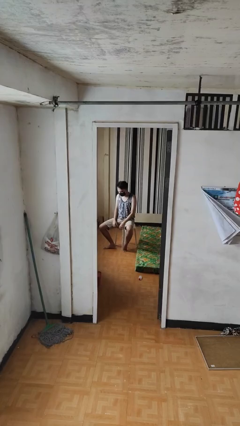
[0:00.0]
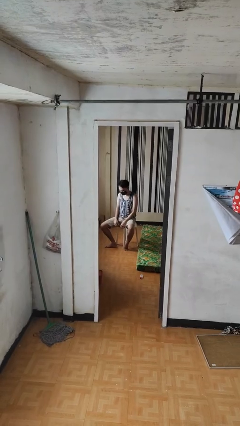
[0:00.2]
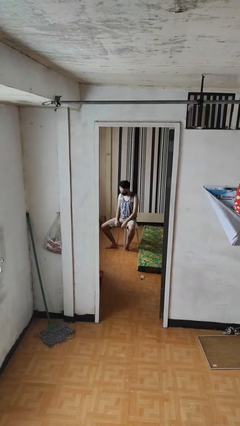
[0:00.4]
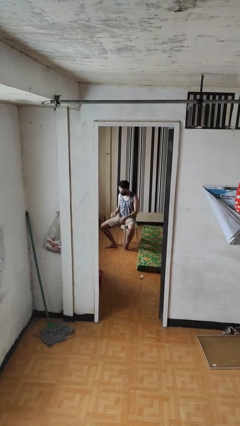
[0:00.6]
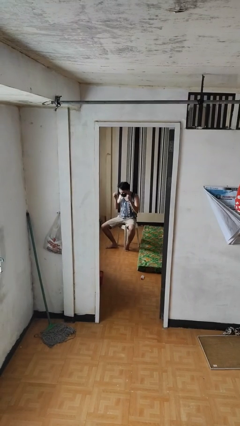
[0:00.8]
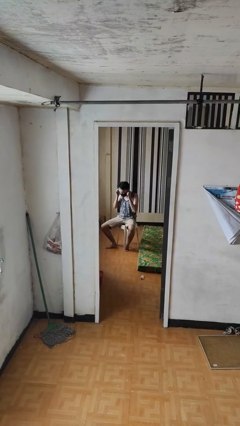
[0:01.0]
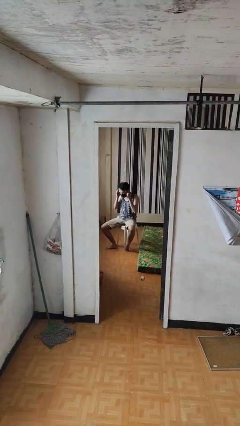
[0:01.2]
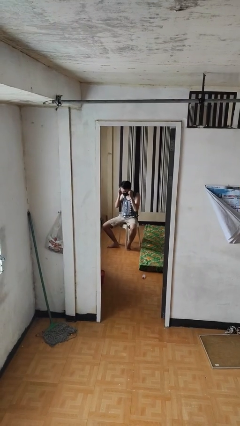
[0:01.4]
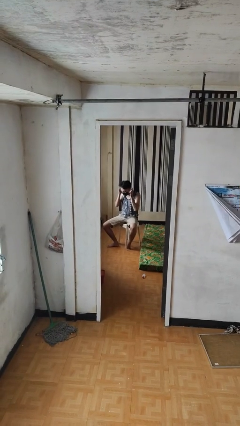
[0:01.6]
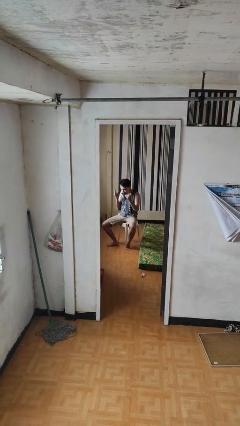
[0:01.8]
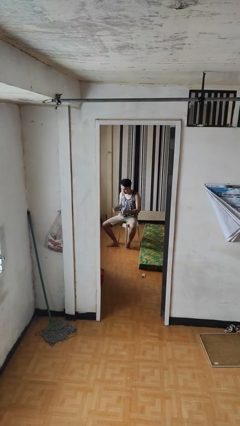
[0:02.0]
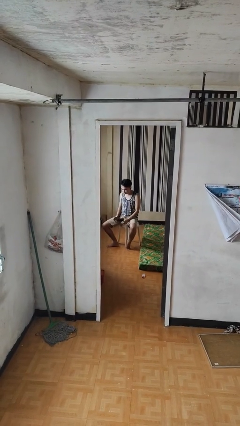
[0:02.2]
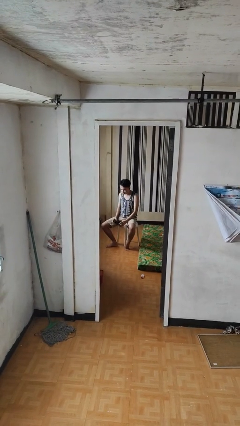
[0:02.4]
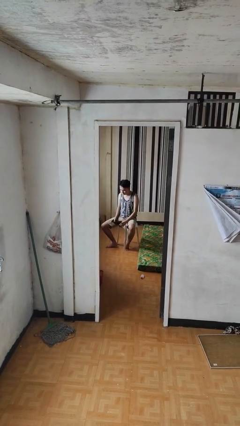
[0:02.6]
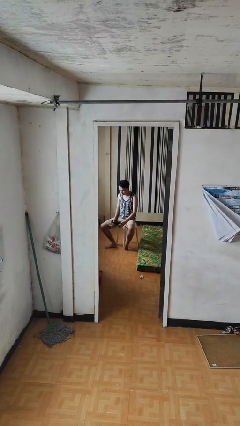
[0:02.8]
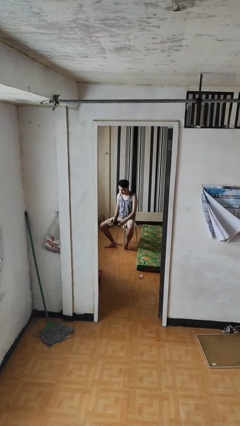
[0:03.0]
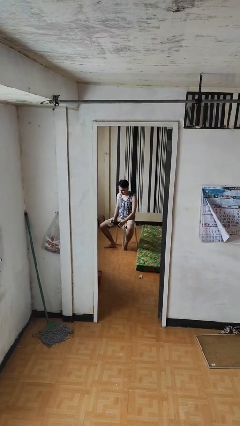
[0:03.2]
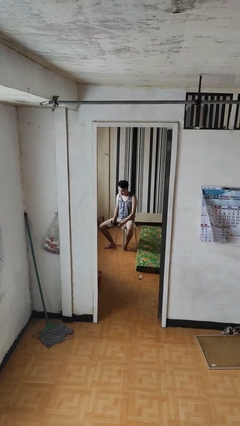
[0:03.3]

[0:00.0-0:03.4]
person takes off facemask

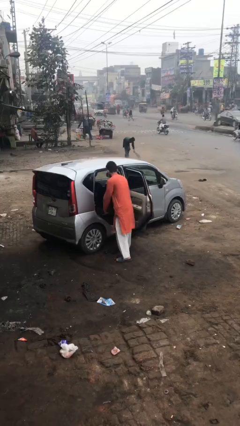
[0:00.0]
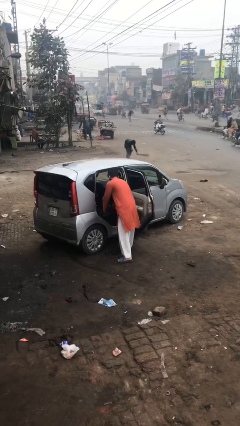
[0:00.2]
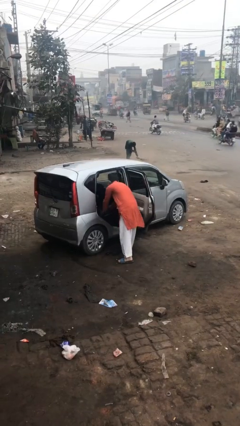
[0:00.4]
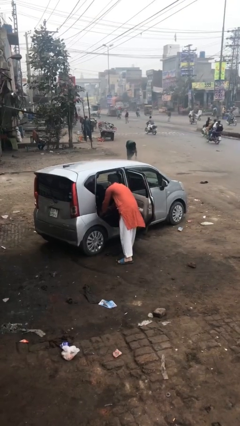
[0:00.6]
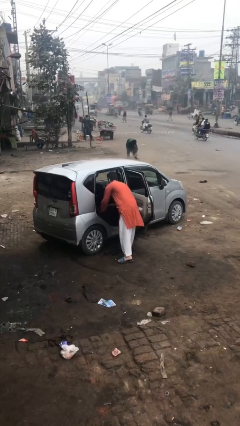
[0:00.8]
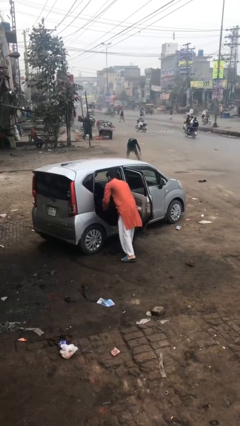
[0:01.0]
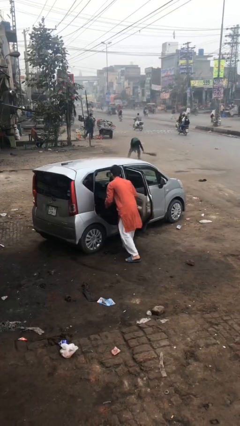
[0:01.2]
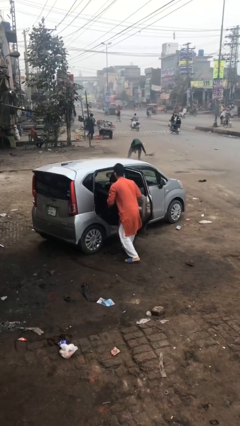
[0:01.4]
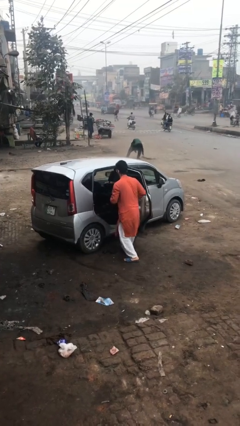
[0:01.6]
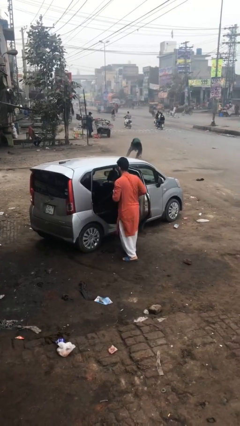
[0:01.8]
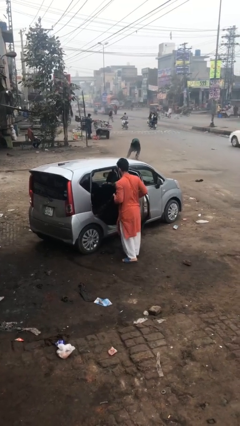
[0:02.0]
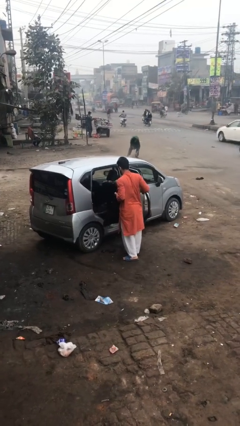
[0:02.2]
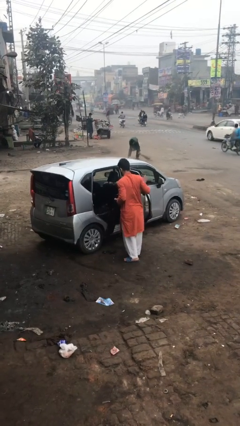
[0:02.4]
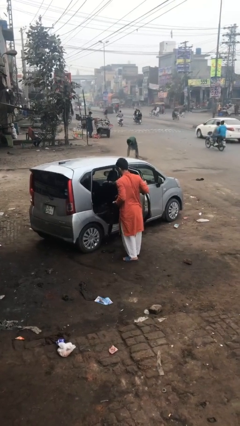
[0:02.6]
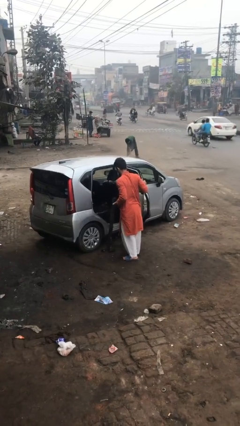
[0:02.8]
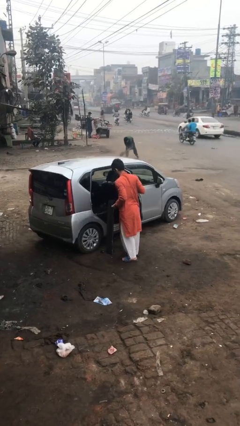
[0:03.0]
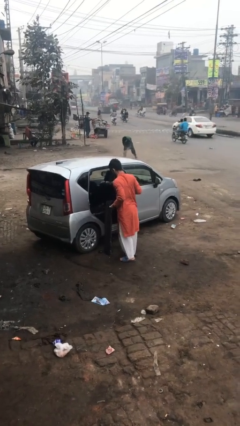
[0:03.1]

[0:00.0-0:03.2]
person unloads car

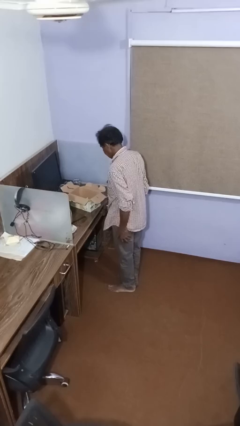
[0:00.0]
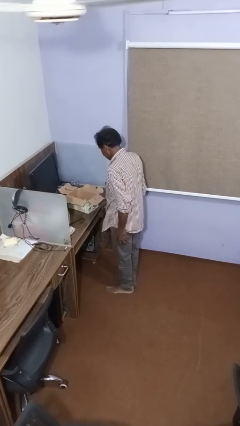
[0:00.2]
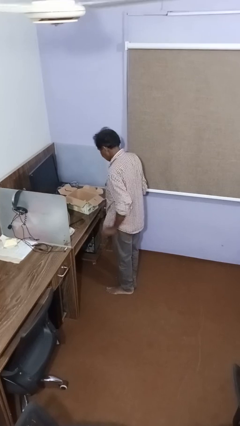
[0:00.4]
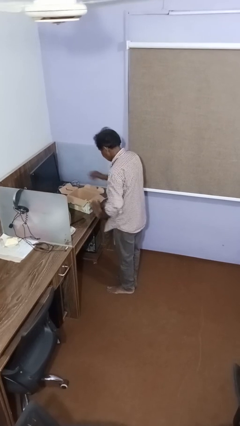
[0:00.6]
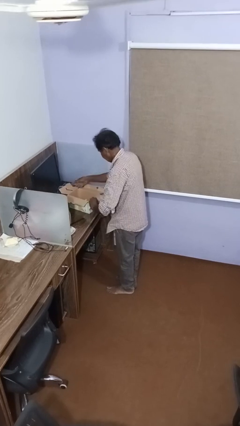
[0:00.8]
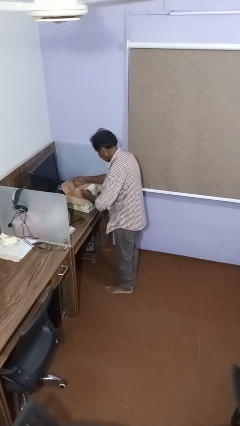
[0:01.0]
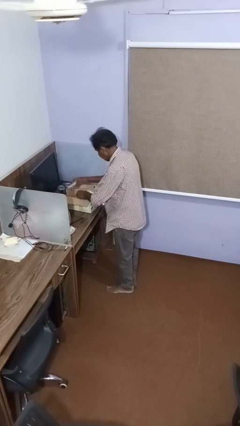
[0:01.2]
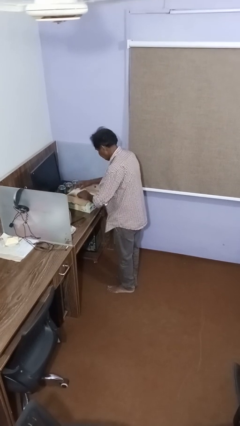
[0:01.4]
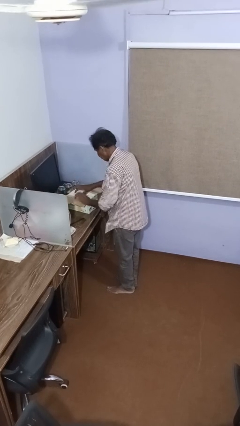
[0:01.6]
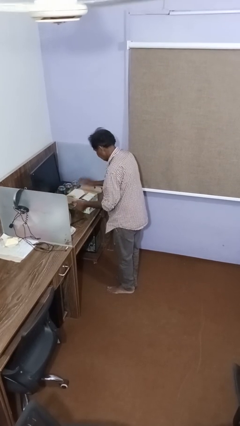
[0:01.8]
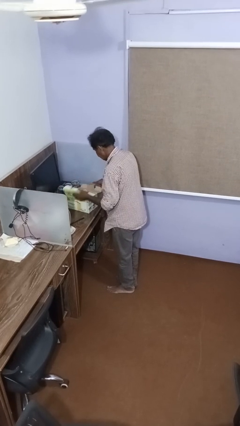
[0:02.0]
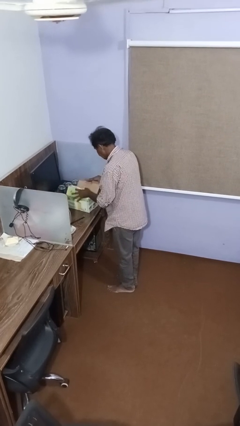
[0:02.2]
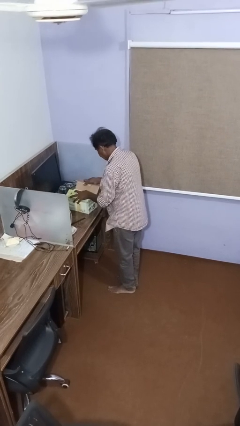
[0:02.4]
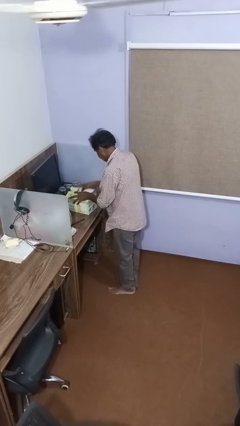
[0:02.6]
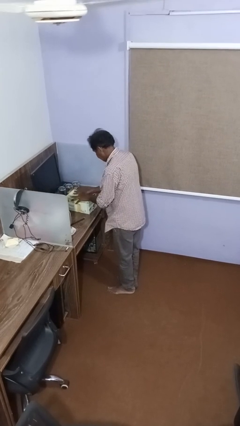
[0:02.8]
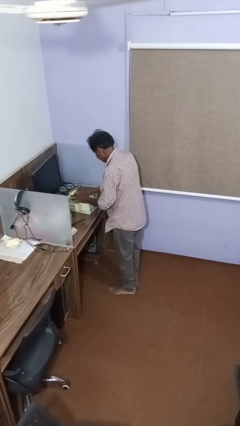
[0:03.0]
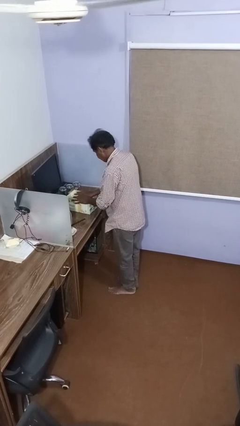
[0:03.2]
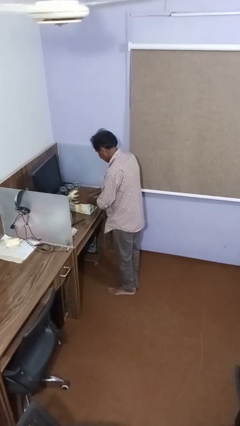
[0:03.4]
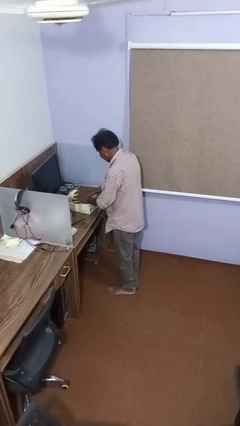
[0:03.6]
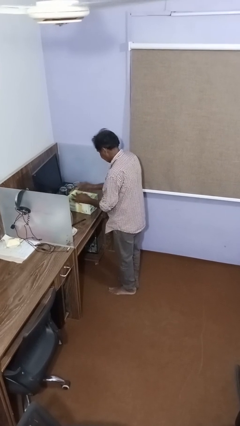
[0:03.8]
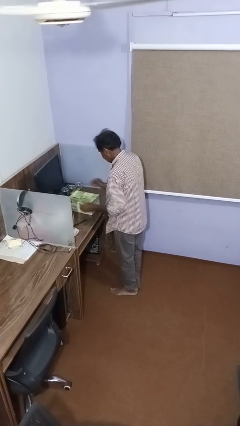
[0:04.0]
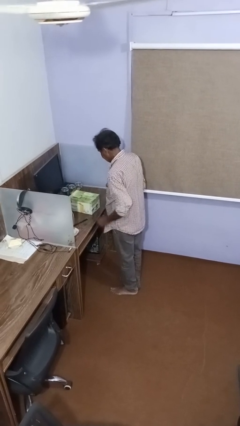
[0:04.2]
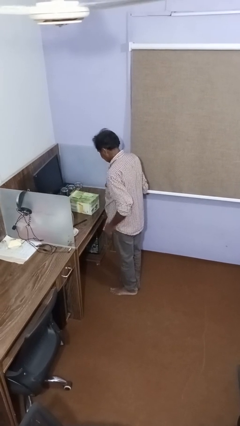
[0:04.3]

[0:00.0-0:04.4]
person closes box

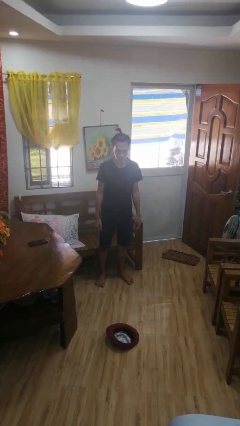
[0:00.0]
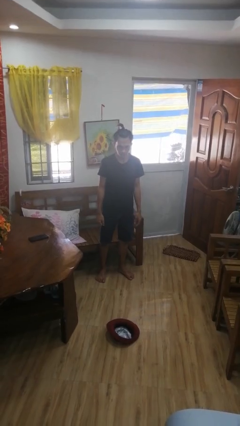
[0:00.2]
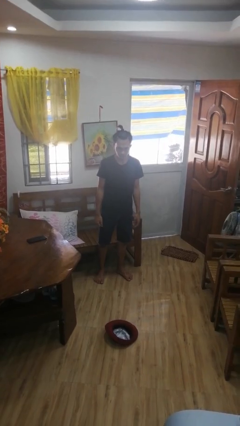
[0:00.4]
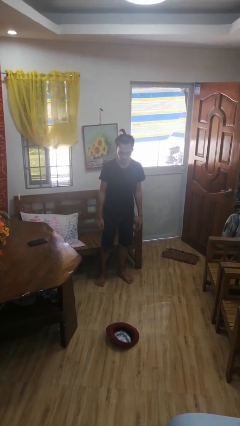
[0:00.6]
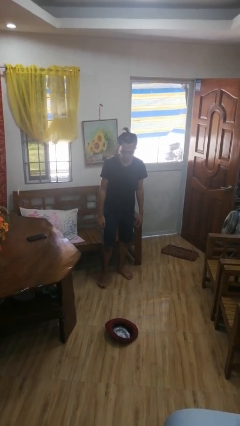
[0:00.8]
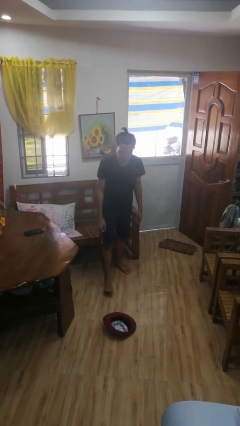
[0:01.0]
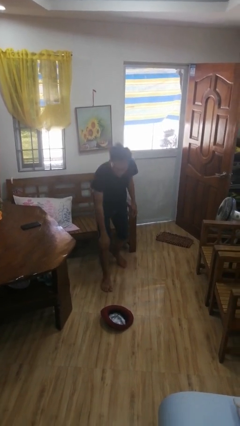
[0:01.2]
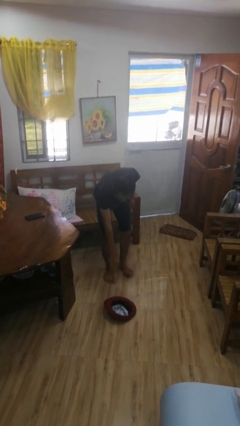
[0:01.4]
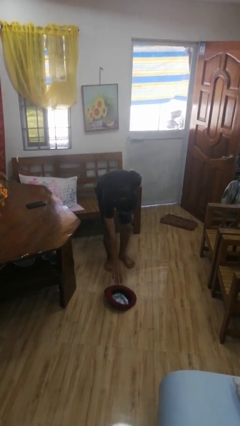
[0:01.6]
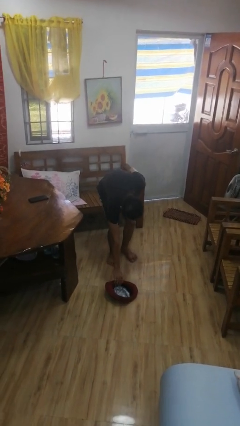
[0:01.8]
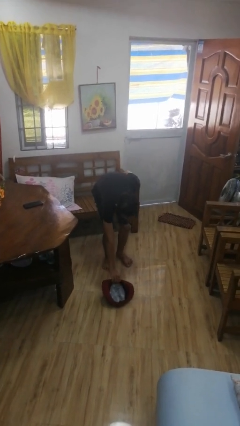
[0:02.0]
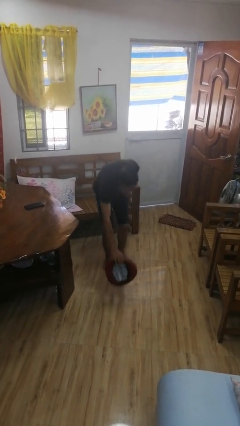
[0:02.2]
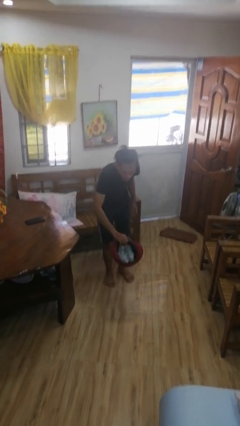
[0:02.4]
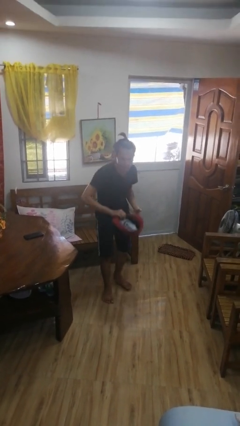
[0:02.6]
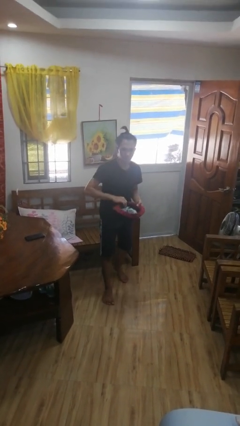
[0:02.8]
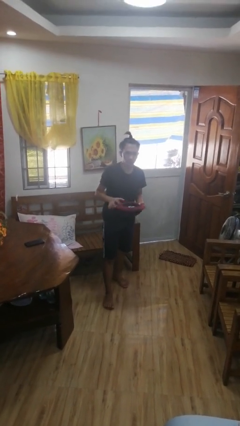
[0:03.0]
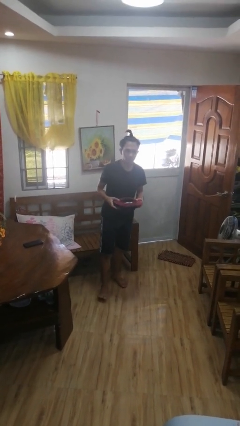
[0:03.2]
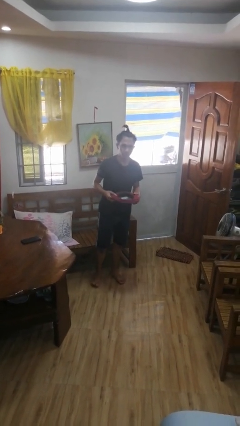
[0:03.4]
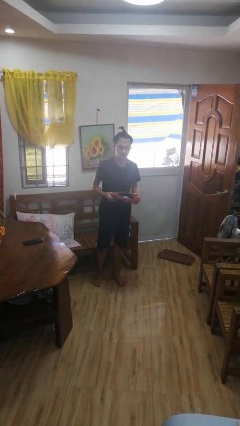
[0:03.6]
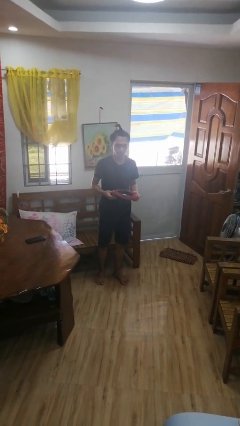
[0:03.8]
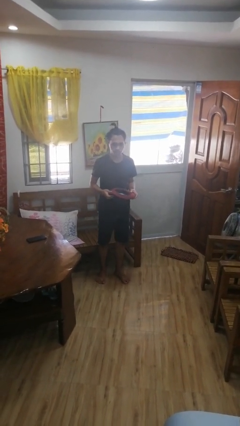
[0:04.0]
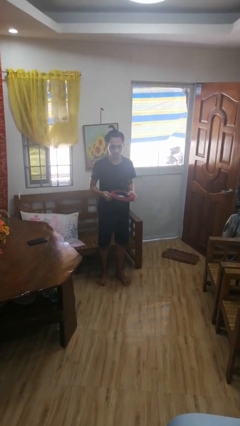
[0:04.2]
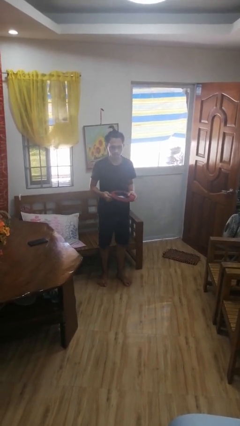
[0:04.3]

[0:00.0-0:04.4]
person picks up object from floor

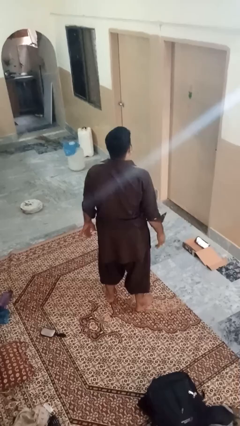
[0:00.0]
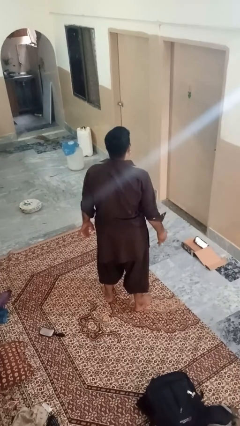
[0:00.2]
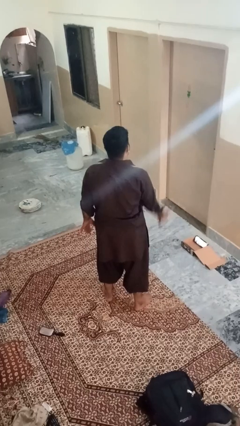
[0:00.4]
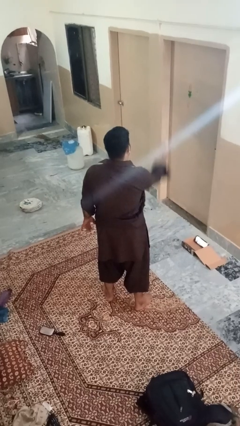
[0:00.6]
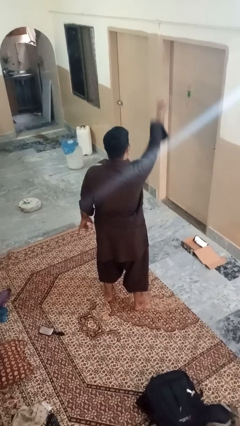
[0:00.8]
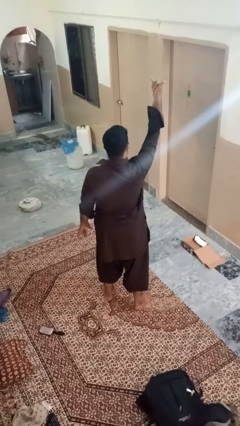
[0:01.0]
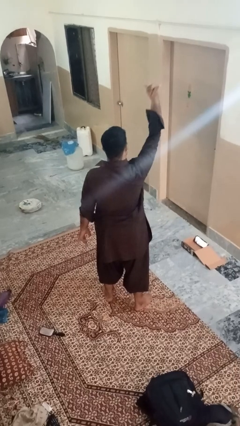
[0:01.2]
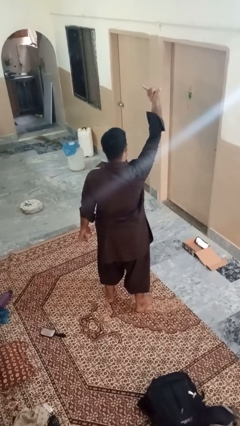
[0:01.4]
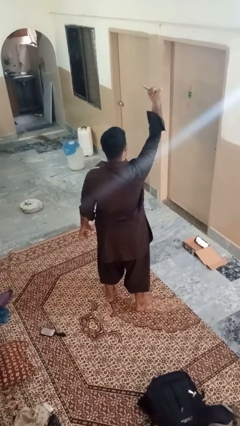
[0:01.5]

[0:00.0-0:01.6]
person gestures hang loose

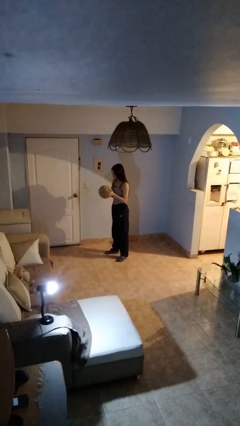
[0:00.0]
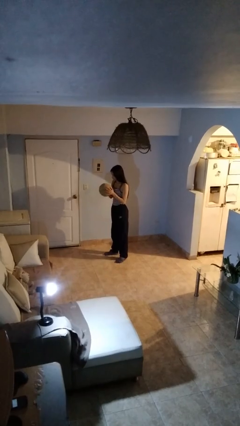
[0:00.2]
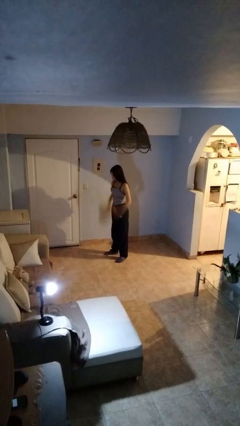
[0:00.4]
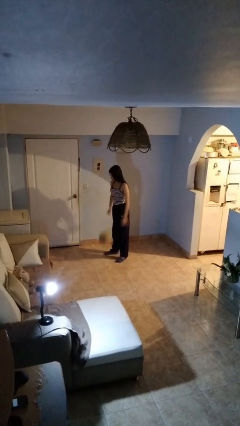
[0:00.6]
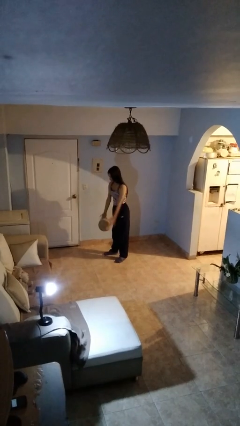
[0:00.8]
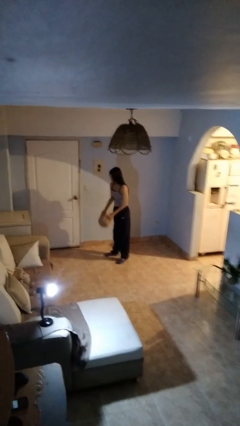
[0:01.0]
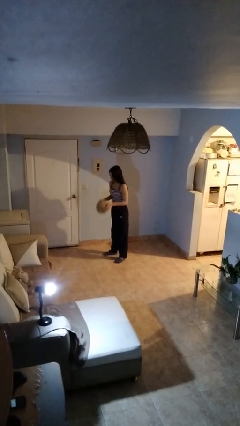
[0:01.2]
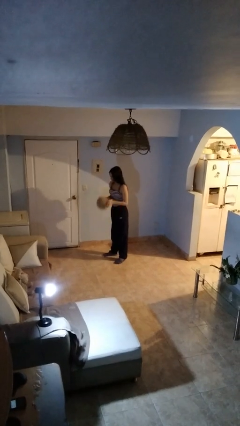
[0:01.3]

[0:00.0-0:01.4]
person bounces ball on floor
